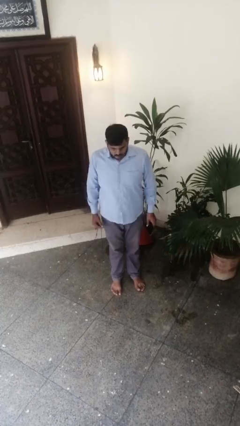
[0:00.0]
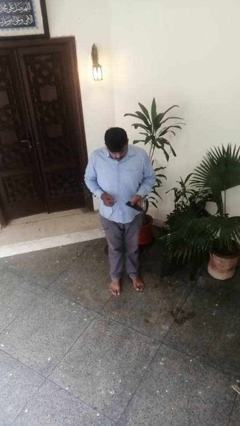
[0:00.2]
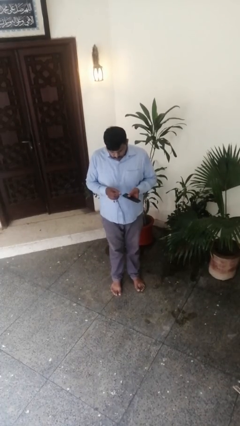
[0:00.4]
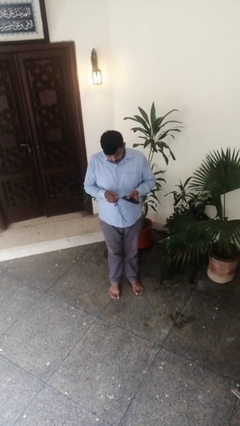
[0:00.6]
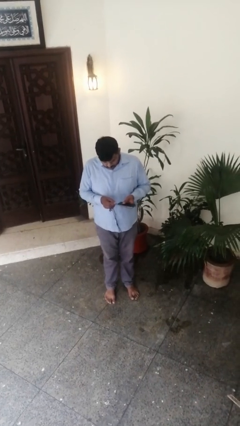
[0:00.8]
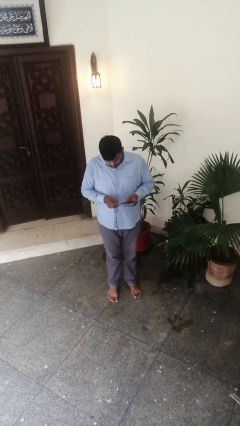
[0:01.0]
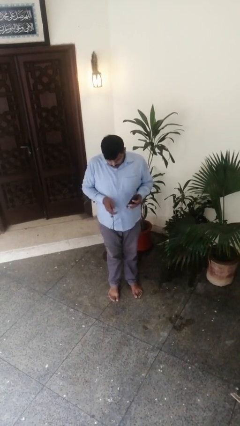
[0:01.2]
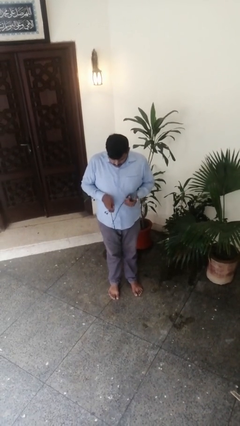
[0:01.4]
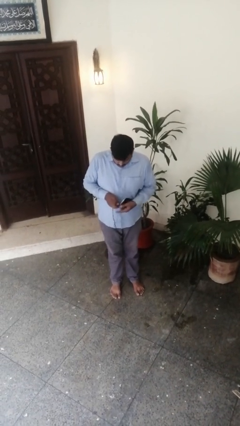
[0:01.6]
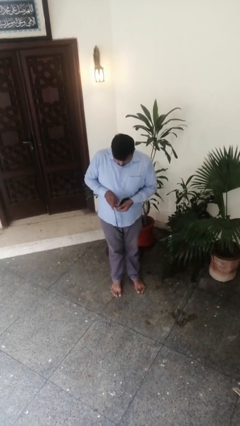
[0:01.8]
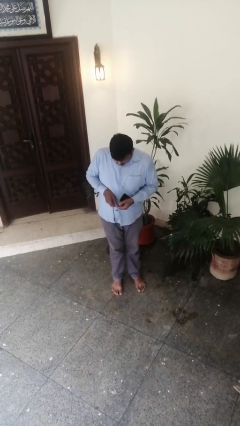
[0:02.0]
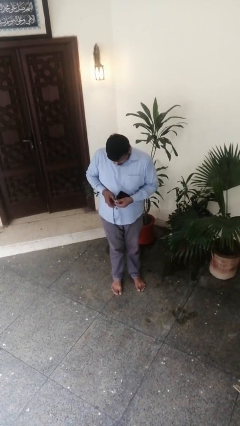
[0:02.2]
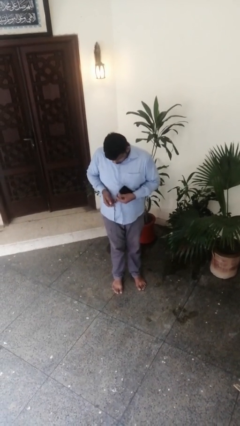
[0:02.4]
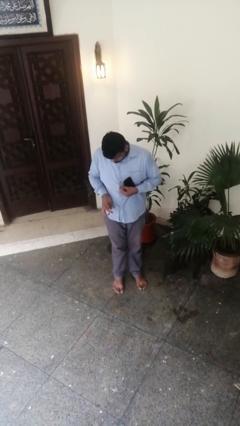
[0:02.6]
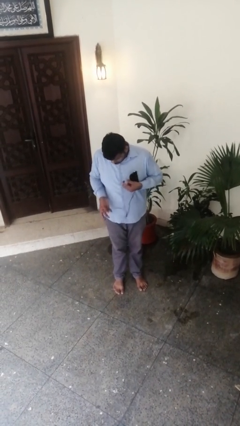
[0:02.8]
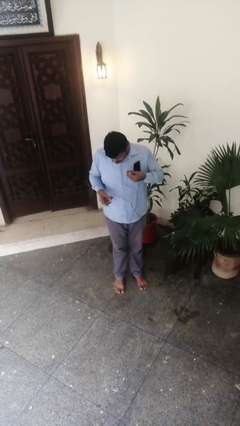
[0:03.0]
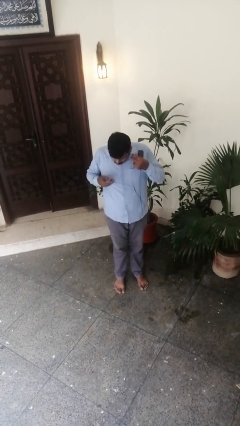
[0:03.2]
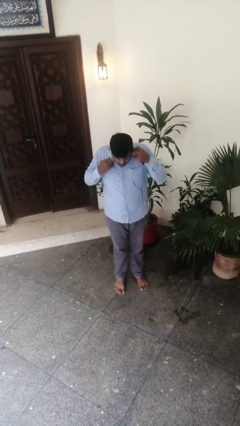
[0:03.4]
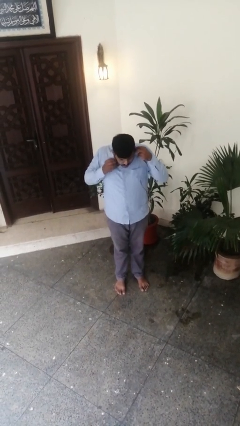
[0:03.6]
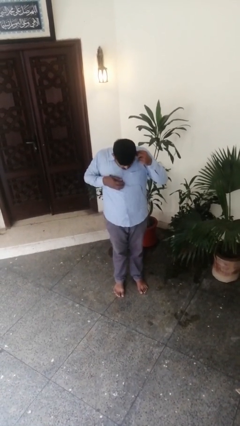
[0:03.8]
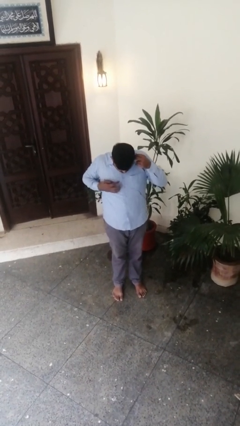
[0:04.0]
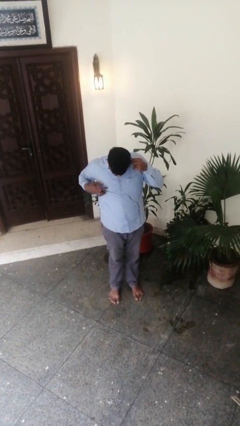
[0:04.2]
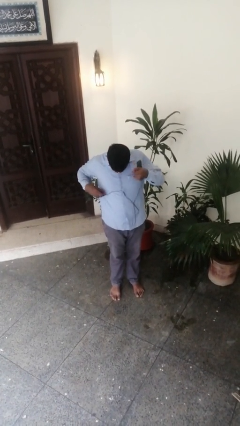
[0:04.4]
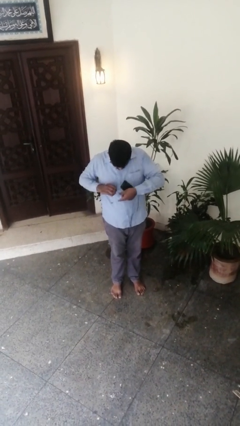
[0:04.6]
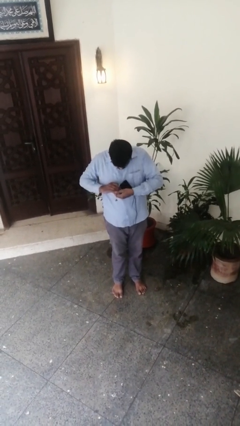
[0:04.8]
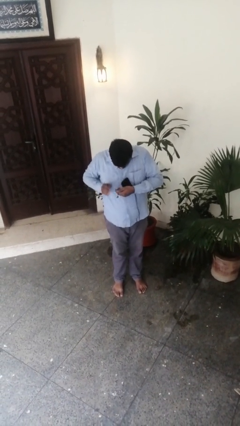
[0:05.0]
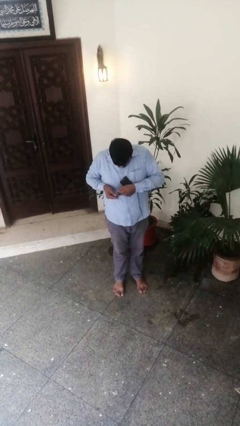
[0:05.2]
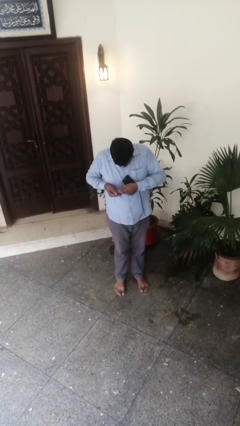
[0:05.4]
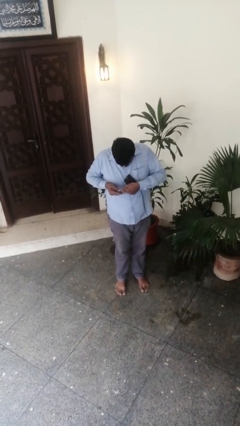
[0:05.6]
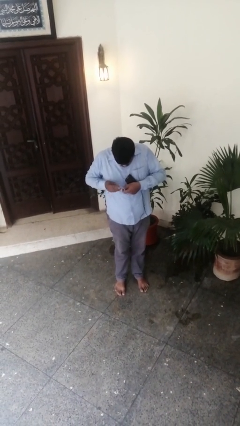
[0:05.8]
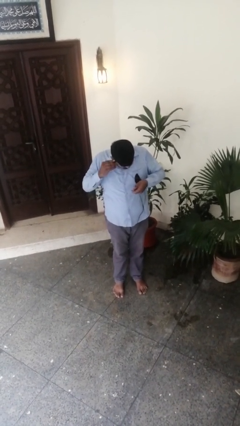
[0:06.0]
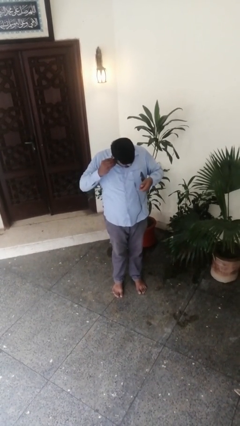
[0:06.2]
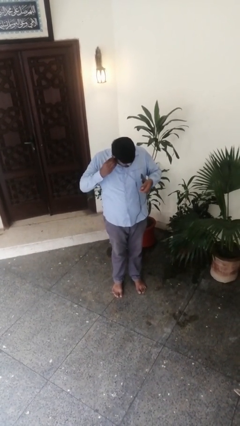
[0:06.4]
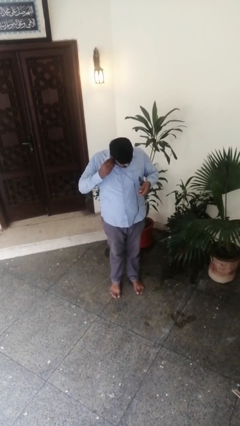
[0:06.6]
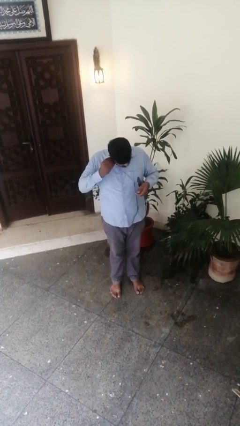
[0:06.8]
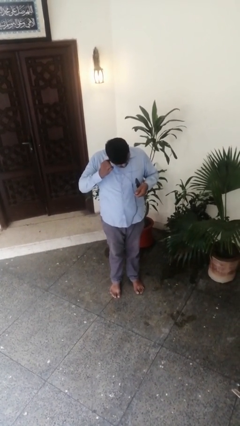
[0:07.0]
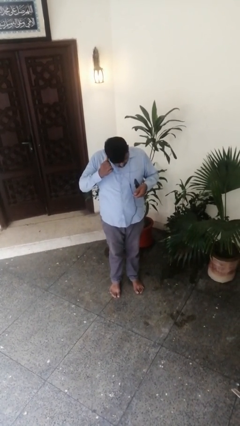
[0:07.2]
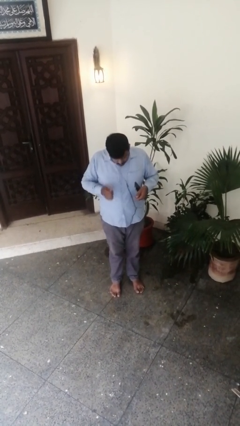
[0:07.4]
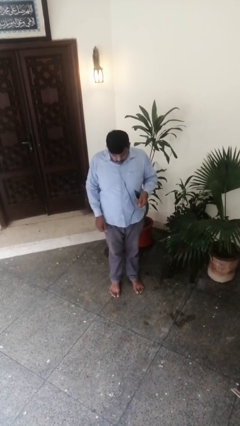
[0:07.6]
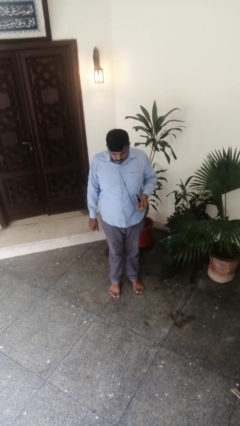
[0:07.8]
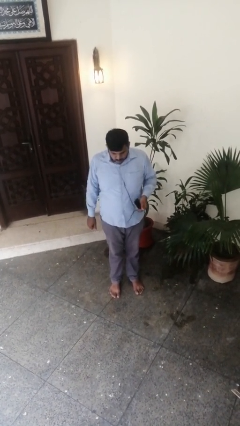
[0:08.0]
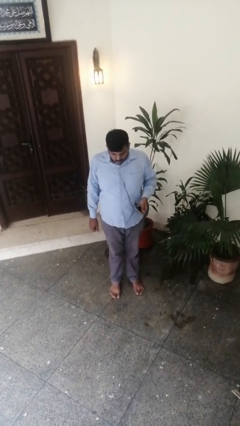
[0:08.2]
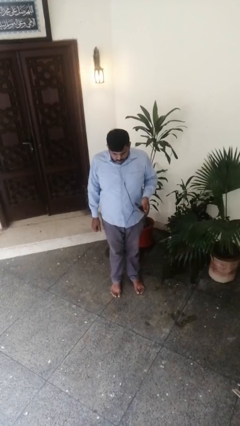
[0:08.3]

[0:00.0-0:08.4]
person puts on headphones

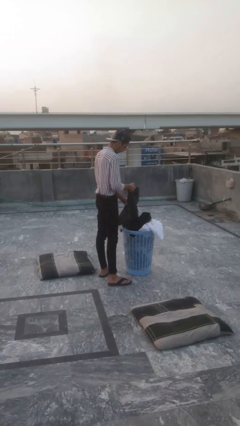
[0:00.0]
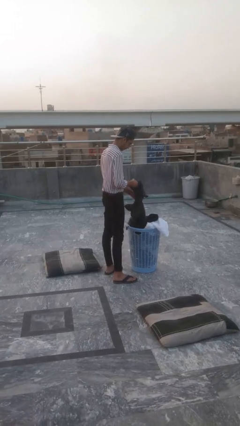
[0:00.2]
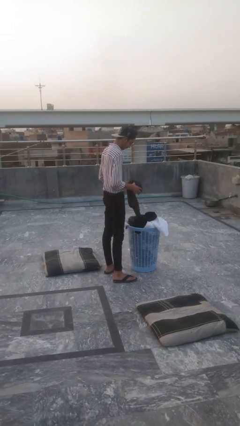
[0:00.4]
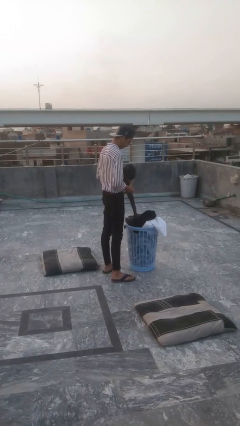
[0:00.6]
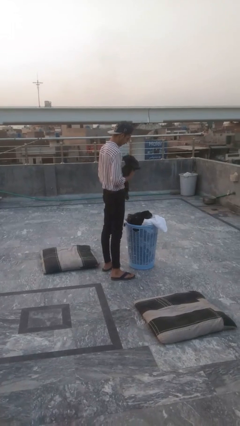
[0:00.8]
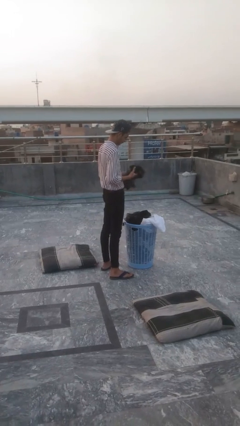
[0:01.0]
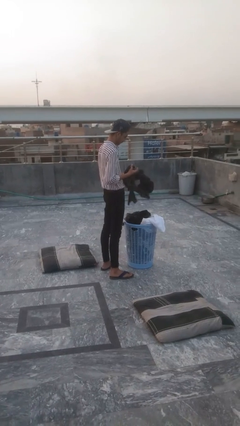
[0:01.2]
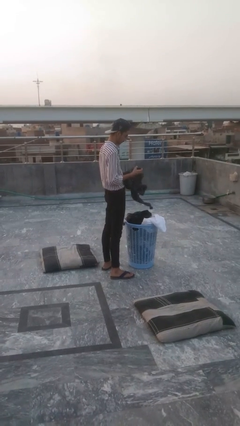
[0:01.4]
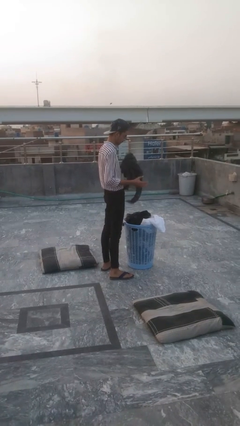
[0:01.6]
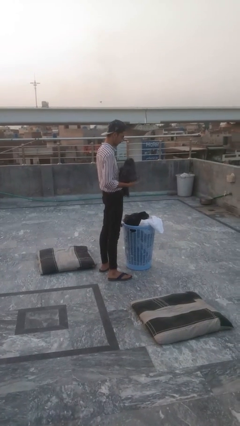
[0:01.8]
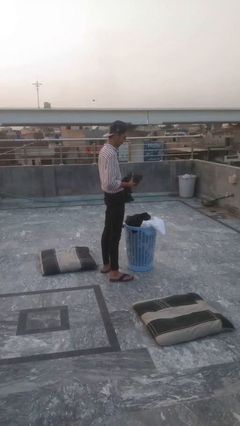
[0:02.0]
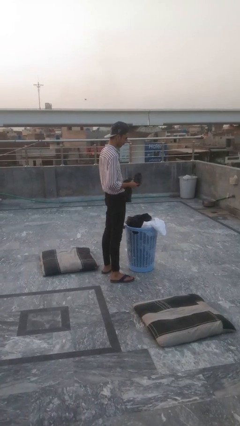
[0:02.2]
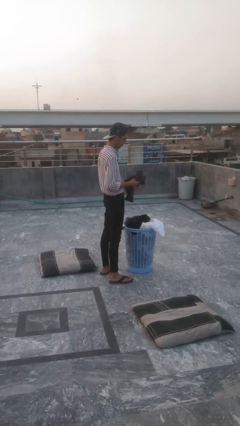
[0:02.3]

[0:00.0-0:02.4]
person takes object from basket

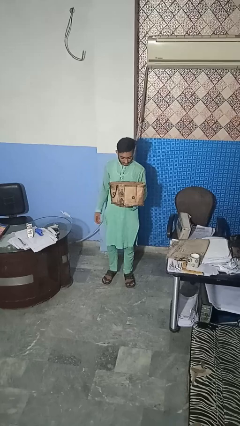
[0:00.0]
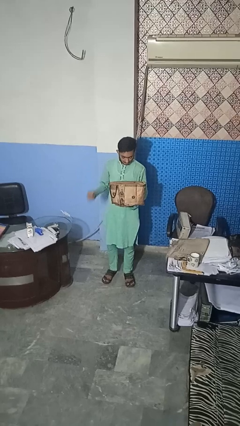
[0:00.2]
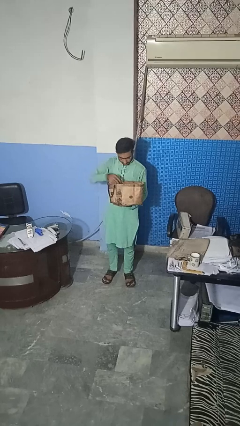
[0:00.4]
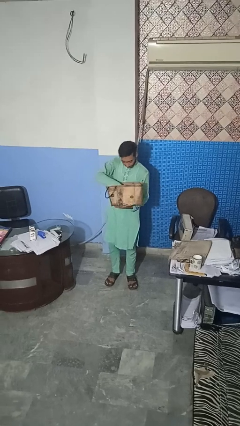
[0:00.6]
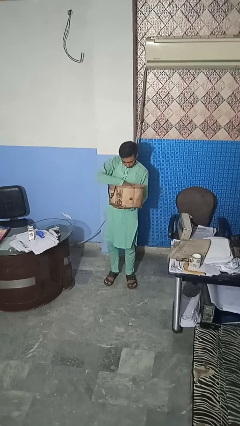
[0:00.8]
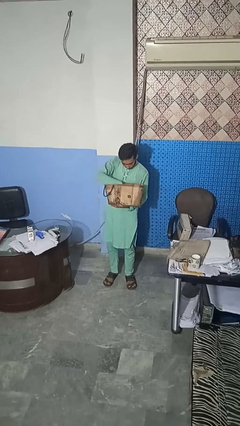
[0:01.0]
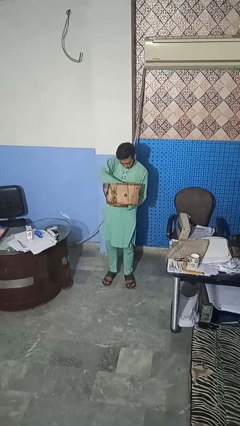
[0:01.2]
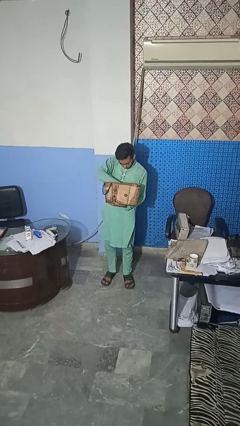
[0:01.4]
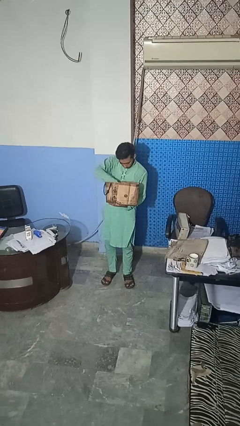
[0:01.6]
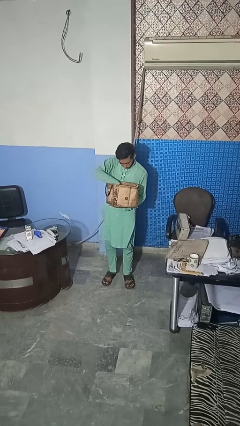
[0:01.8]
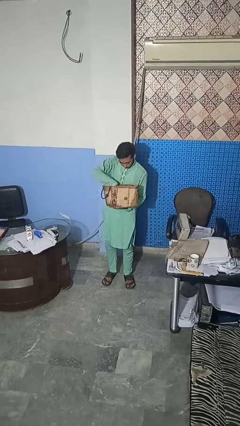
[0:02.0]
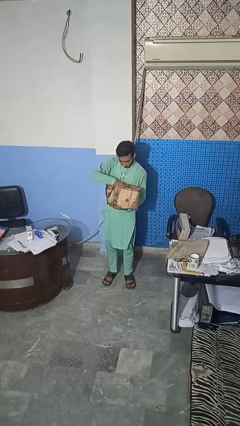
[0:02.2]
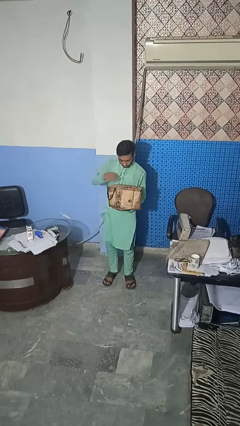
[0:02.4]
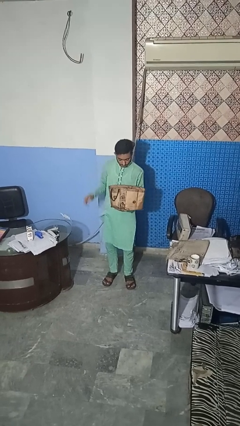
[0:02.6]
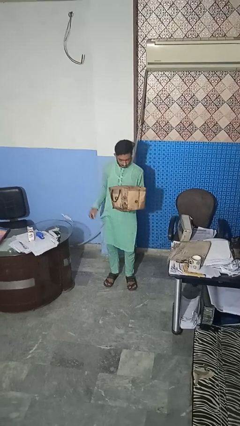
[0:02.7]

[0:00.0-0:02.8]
person searches in bag

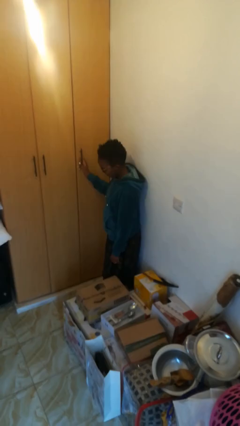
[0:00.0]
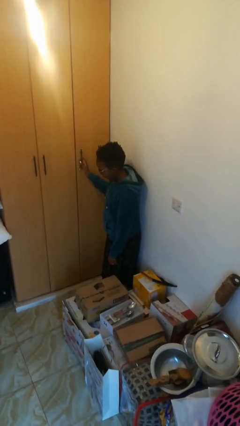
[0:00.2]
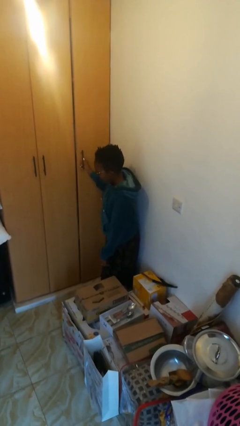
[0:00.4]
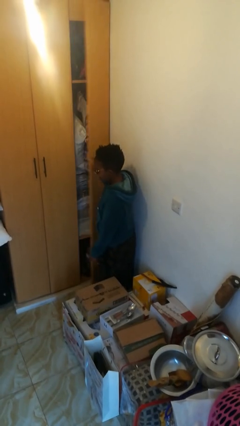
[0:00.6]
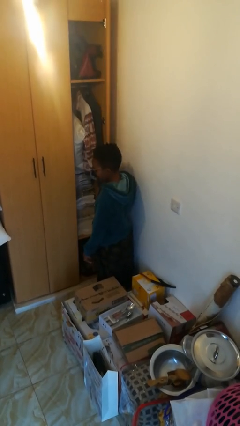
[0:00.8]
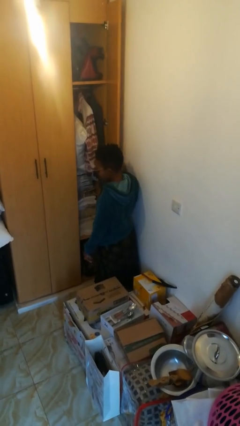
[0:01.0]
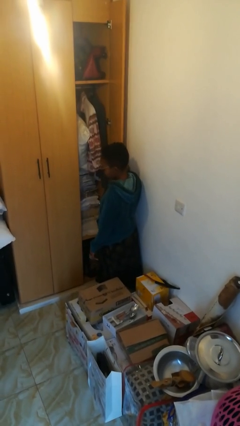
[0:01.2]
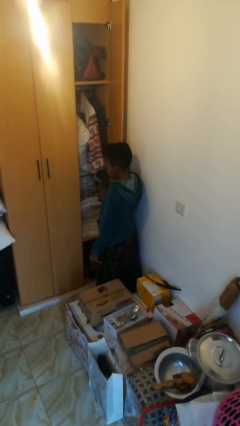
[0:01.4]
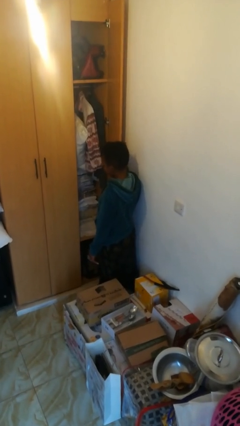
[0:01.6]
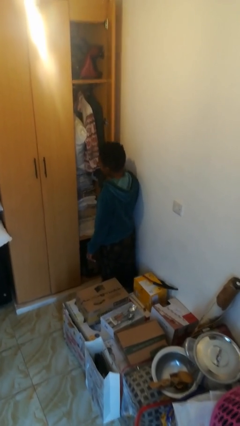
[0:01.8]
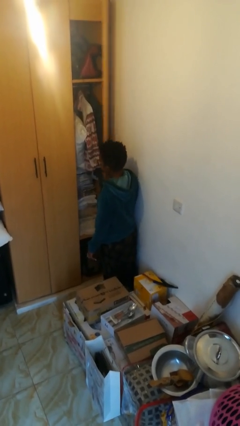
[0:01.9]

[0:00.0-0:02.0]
person opens closet door

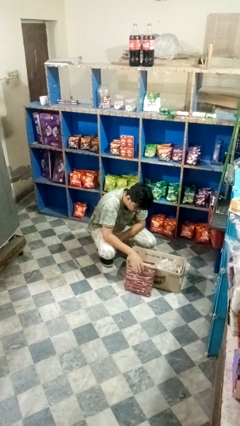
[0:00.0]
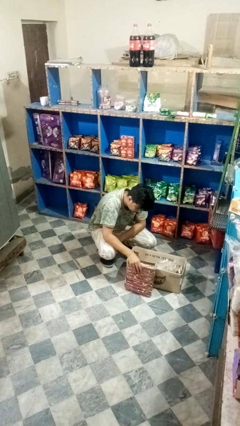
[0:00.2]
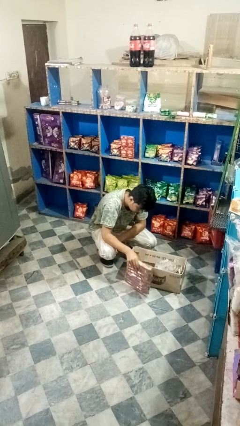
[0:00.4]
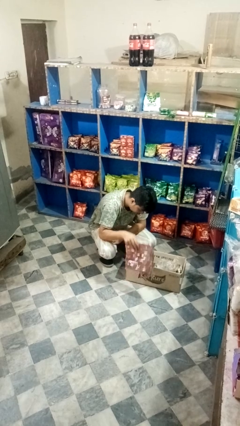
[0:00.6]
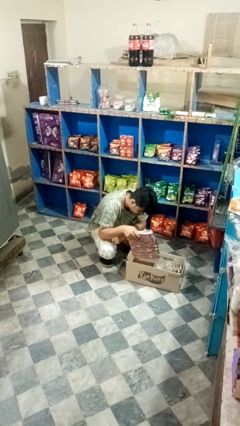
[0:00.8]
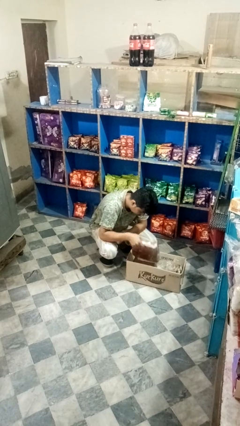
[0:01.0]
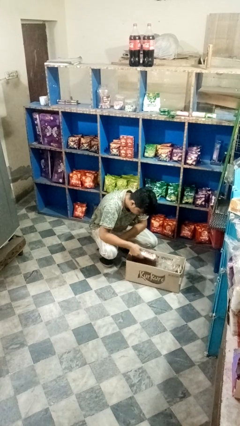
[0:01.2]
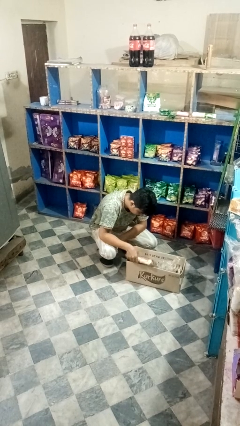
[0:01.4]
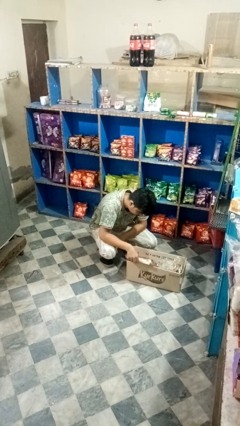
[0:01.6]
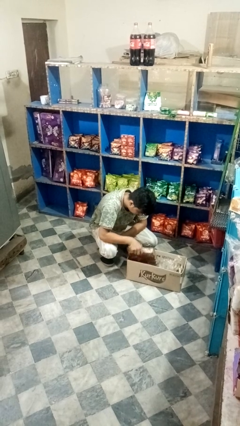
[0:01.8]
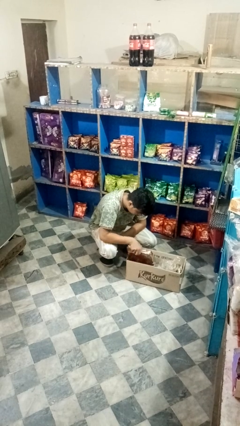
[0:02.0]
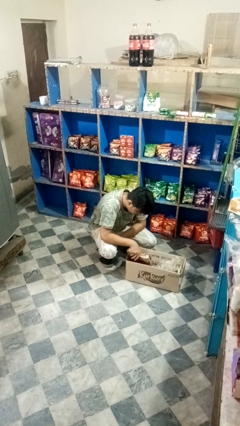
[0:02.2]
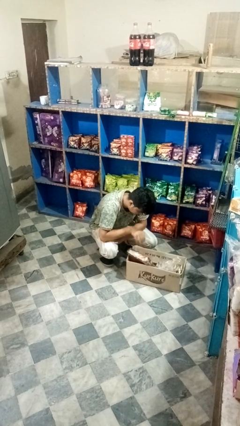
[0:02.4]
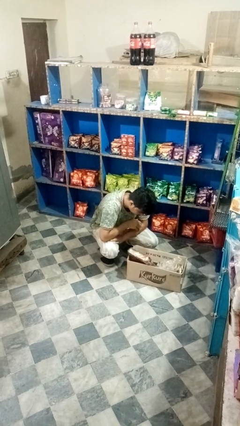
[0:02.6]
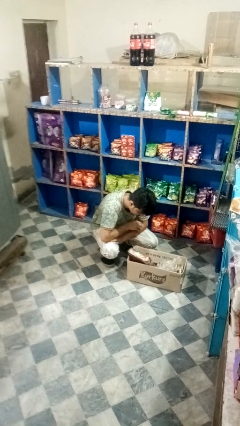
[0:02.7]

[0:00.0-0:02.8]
person puts object into box
